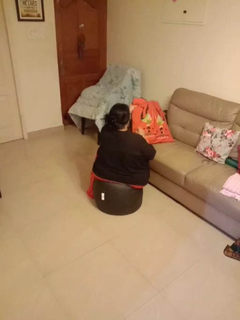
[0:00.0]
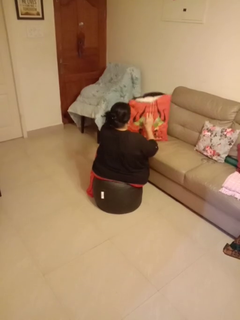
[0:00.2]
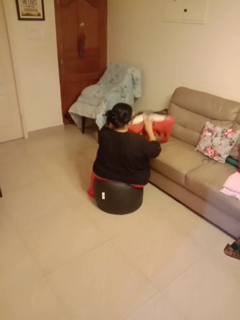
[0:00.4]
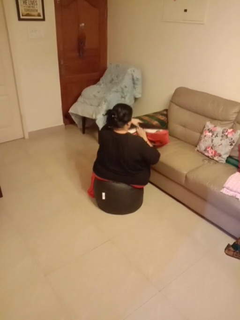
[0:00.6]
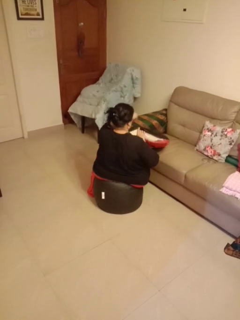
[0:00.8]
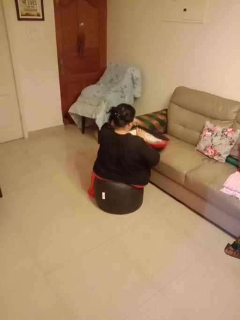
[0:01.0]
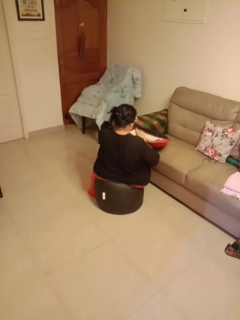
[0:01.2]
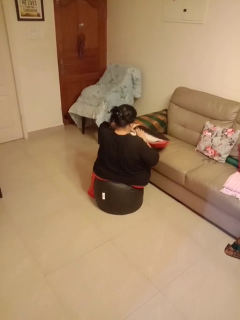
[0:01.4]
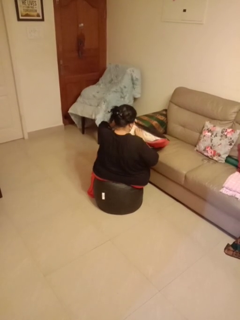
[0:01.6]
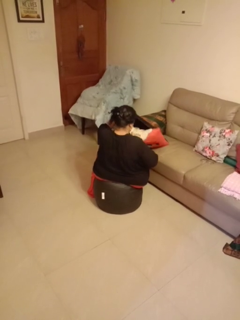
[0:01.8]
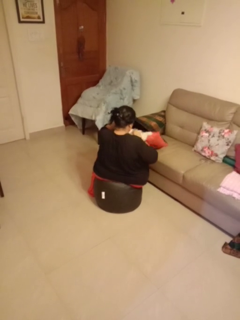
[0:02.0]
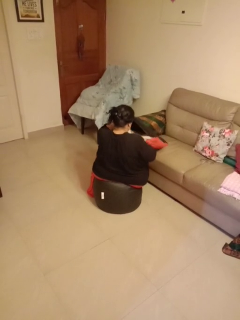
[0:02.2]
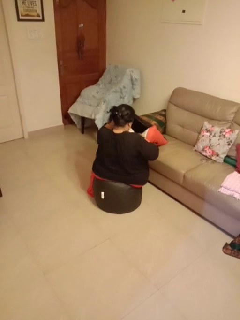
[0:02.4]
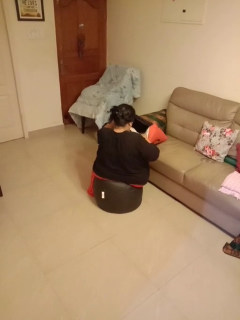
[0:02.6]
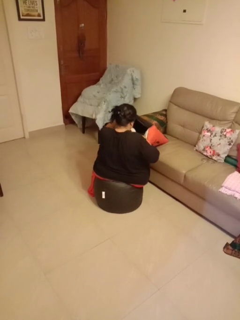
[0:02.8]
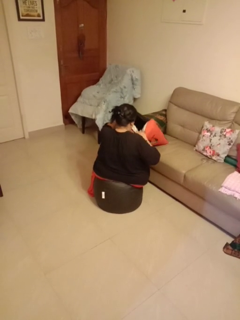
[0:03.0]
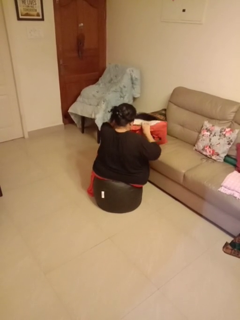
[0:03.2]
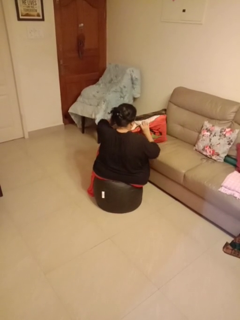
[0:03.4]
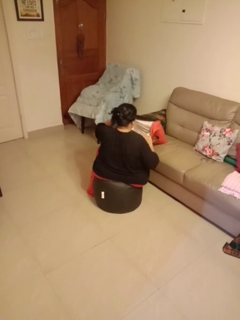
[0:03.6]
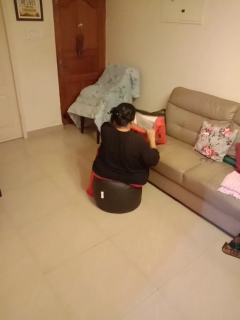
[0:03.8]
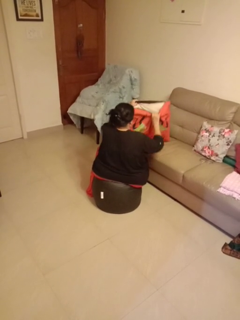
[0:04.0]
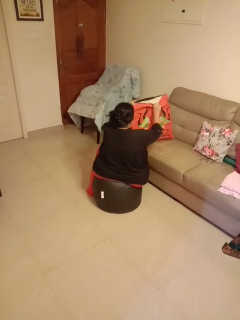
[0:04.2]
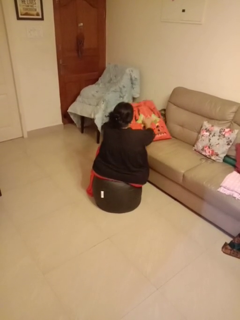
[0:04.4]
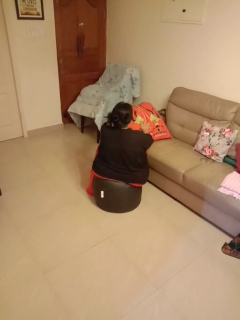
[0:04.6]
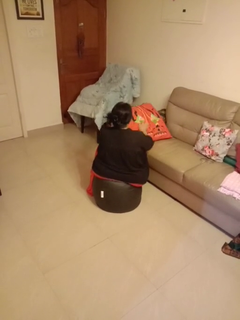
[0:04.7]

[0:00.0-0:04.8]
person searches in couch

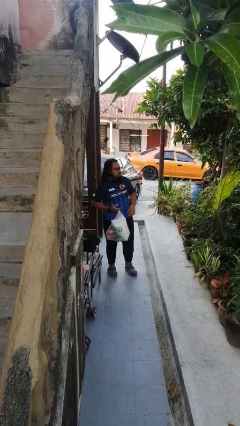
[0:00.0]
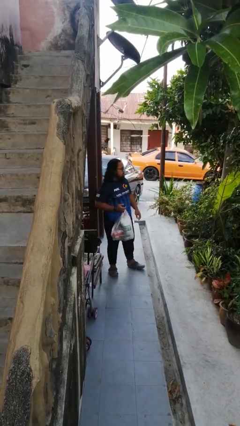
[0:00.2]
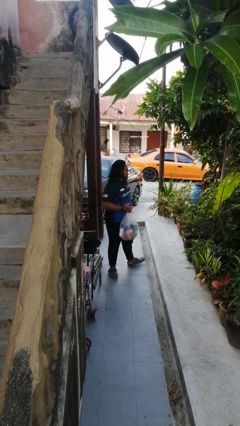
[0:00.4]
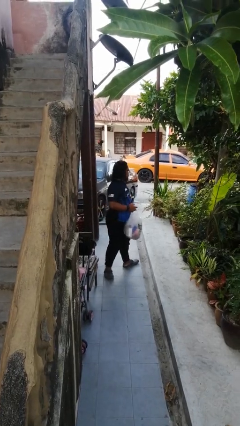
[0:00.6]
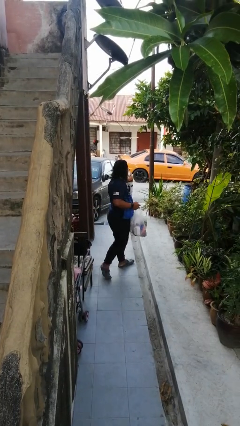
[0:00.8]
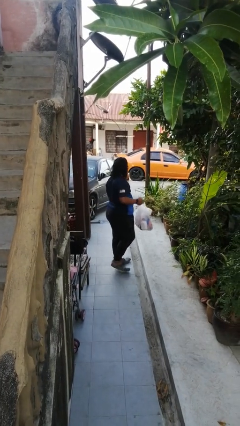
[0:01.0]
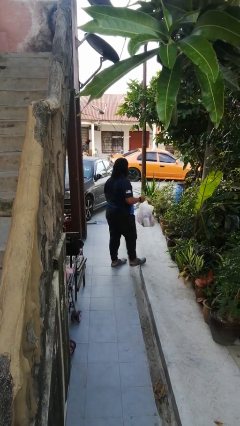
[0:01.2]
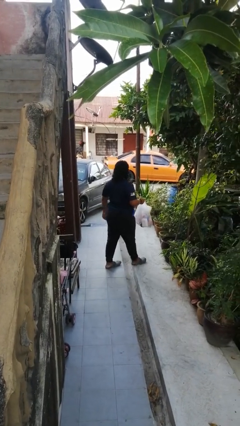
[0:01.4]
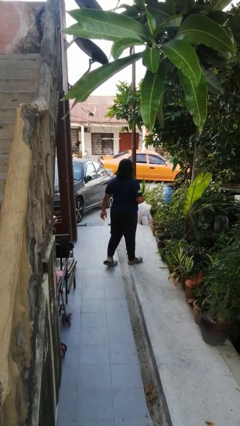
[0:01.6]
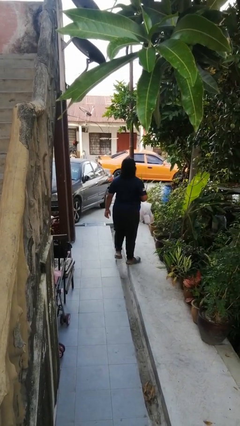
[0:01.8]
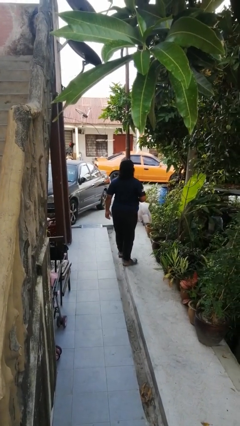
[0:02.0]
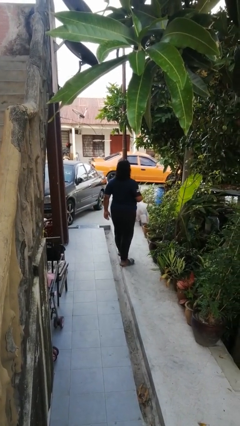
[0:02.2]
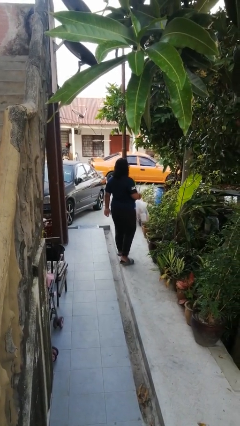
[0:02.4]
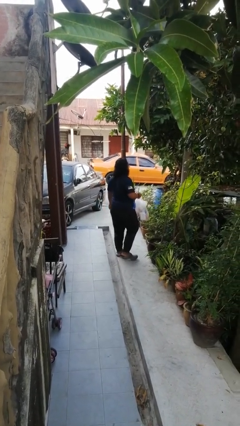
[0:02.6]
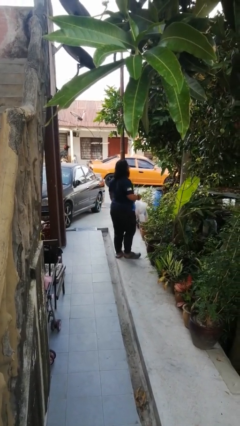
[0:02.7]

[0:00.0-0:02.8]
person carries groceries

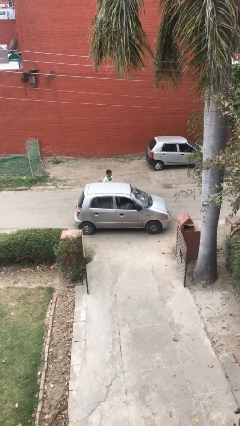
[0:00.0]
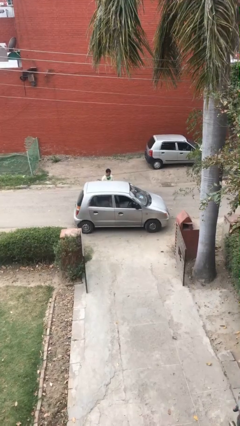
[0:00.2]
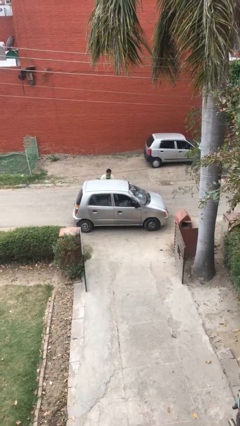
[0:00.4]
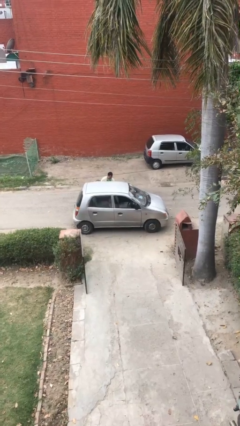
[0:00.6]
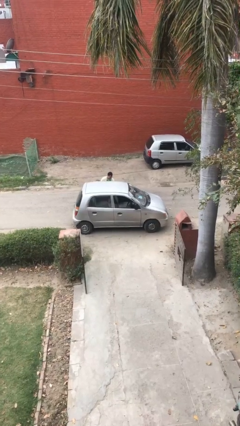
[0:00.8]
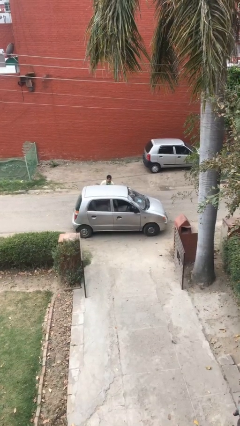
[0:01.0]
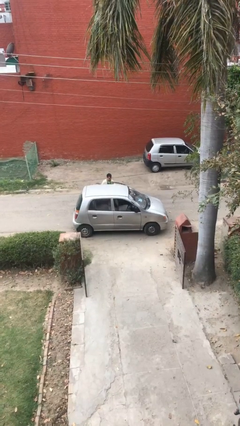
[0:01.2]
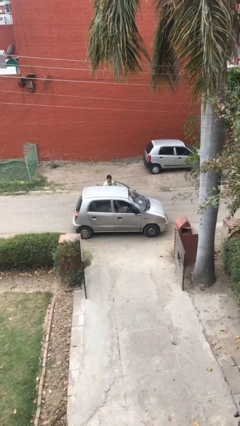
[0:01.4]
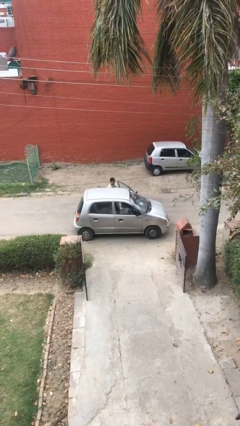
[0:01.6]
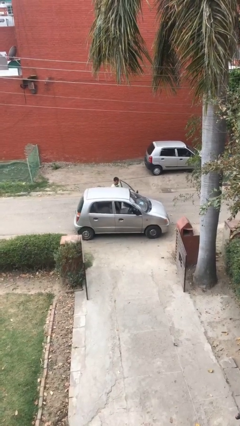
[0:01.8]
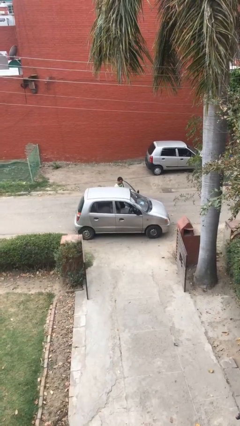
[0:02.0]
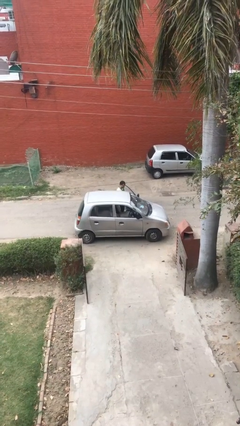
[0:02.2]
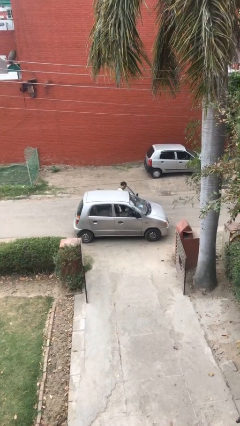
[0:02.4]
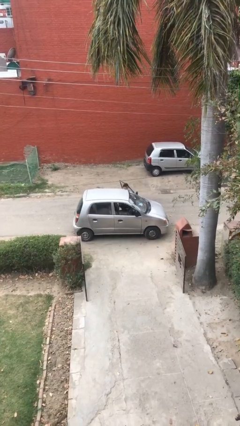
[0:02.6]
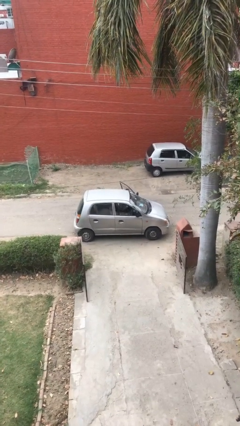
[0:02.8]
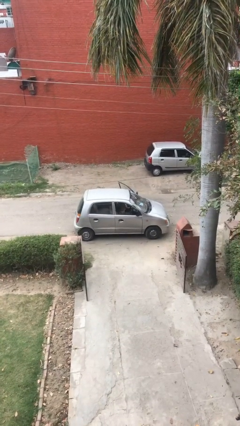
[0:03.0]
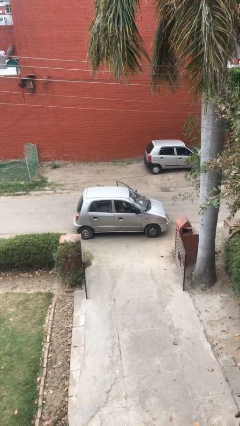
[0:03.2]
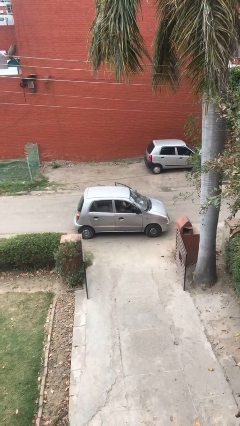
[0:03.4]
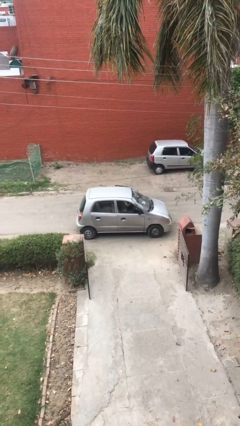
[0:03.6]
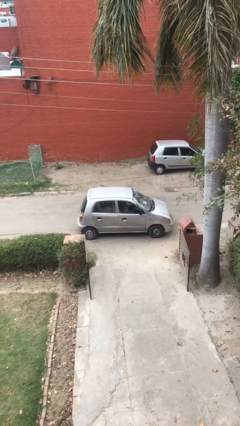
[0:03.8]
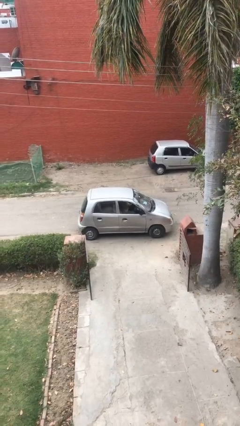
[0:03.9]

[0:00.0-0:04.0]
car picks up person

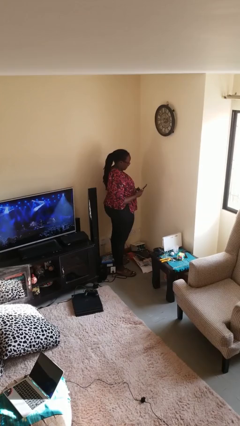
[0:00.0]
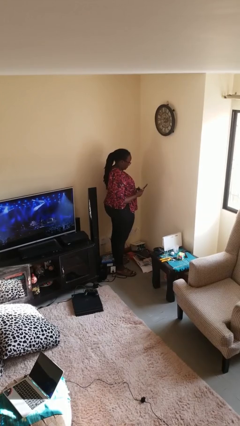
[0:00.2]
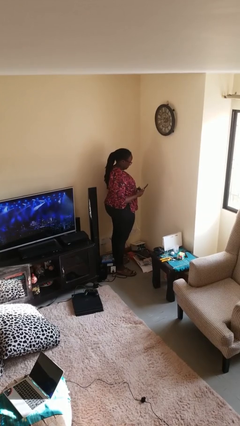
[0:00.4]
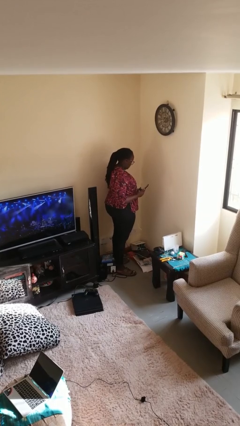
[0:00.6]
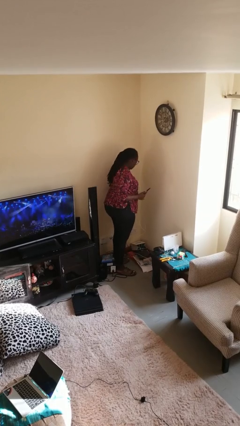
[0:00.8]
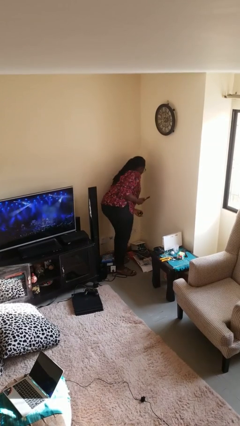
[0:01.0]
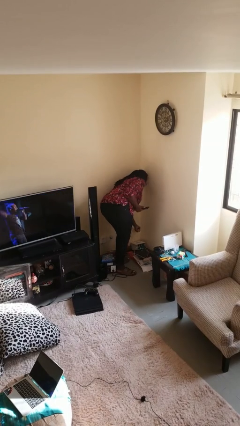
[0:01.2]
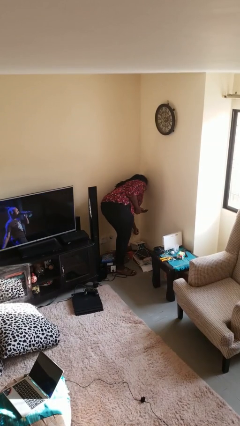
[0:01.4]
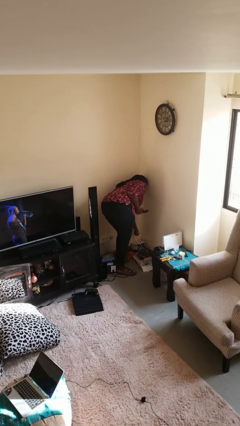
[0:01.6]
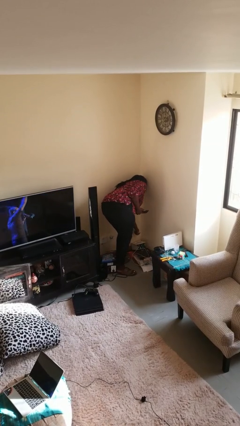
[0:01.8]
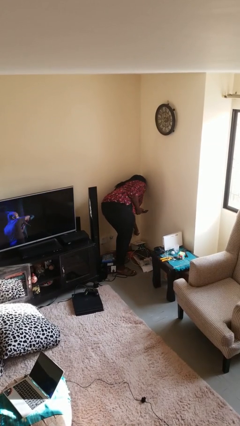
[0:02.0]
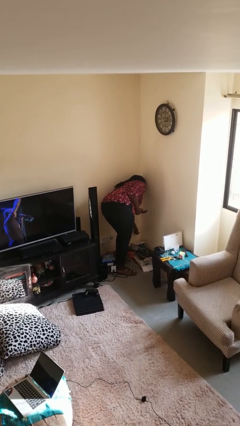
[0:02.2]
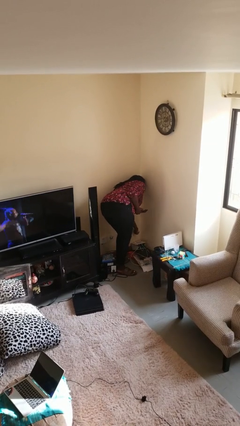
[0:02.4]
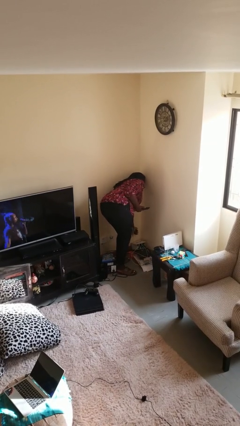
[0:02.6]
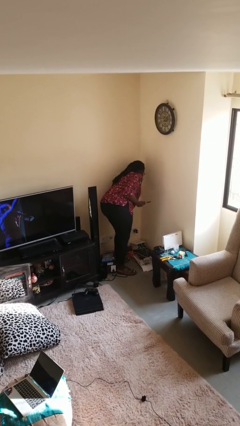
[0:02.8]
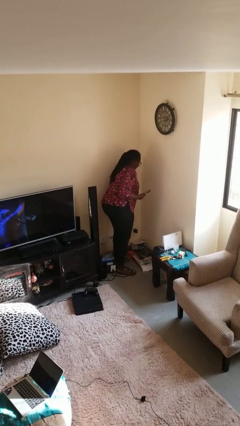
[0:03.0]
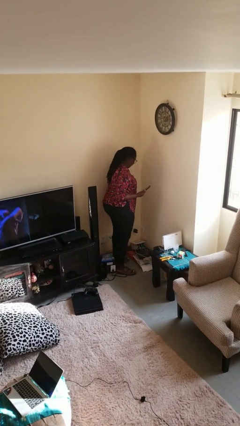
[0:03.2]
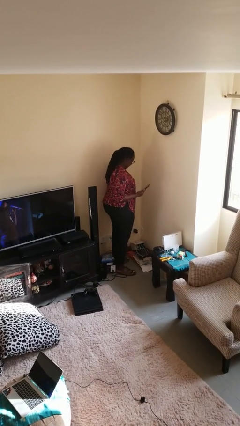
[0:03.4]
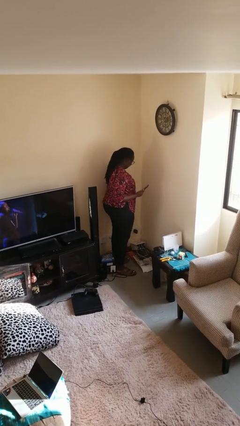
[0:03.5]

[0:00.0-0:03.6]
person plugs into electrical socket

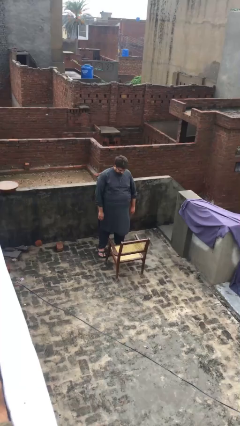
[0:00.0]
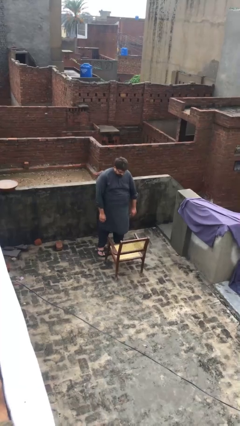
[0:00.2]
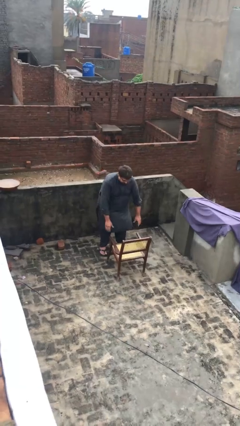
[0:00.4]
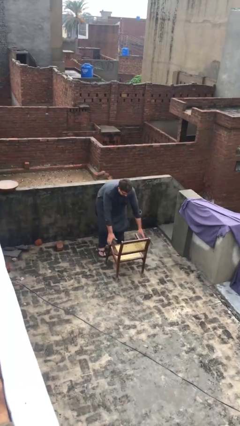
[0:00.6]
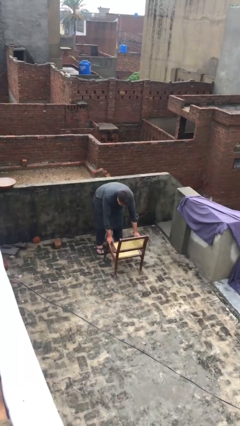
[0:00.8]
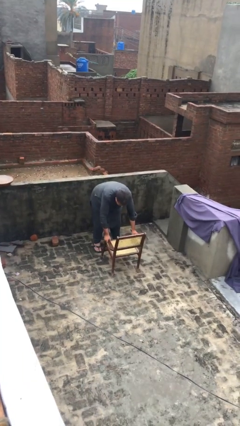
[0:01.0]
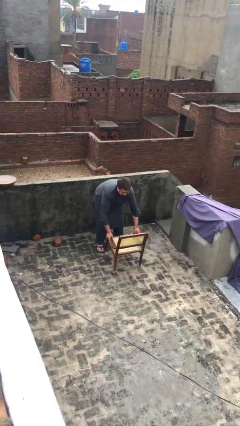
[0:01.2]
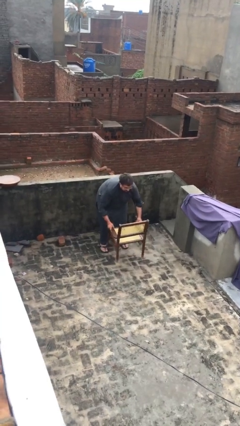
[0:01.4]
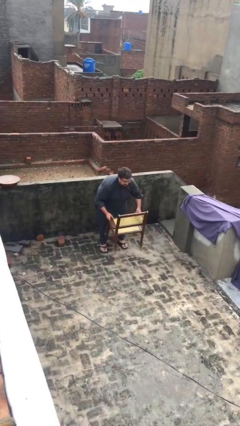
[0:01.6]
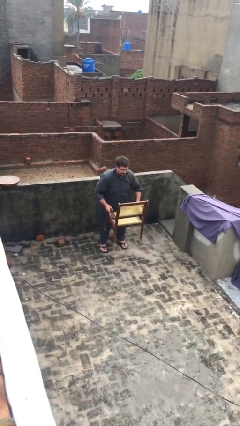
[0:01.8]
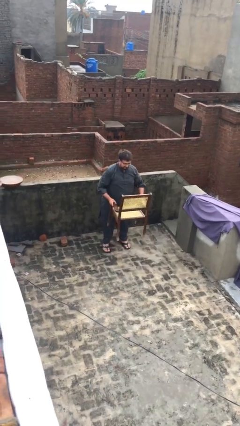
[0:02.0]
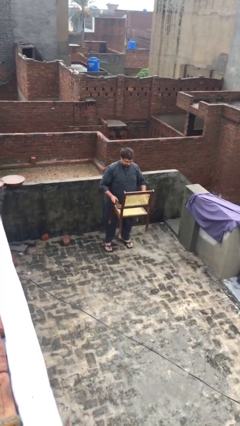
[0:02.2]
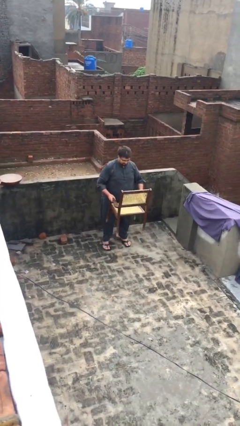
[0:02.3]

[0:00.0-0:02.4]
person picks up object from floor

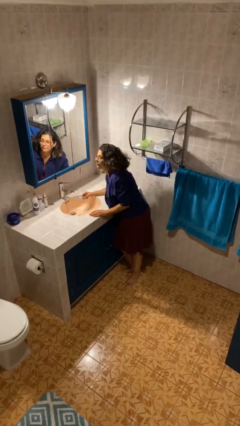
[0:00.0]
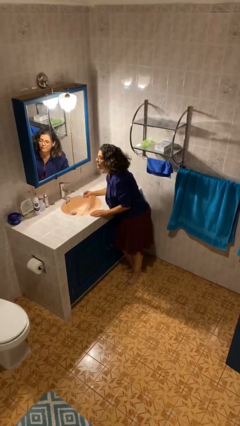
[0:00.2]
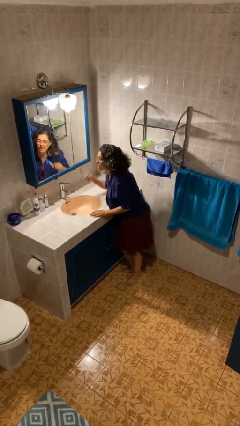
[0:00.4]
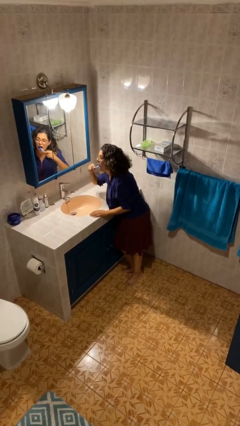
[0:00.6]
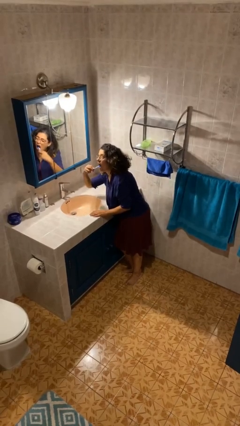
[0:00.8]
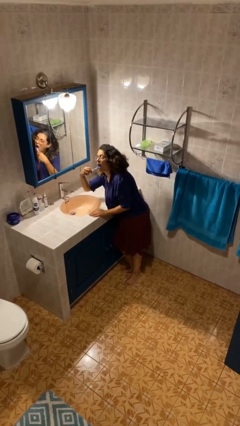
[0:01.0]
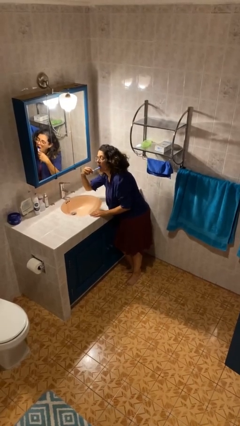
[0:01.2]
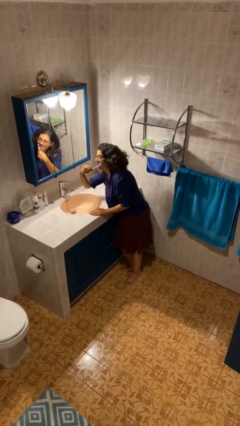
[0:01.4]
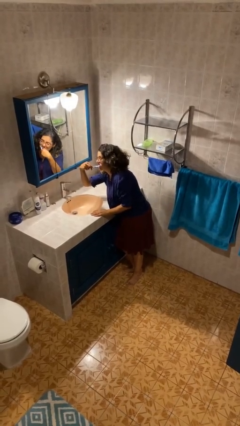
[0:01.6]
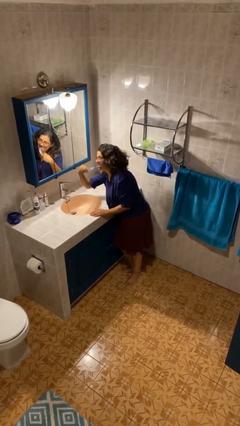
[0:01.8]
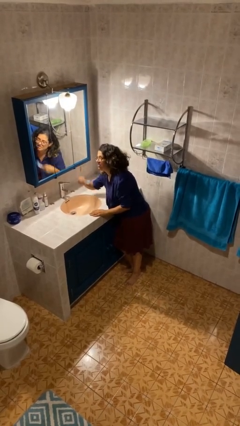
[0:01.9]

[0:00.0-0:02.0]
person brushes teeth
